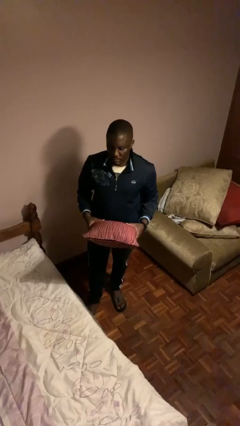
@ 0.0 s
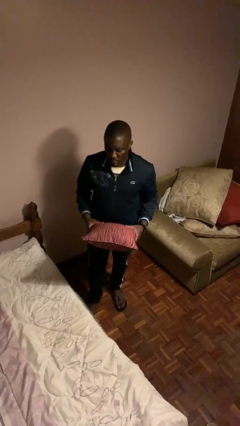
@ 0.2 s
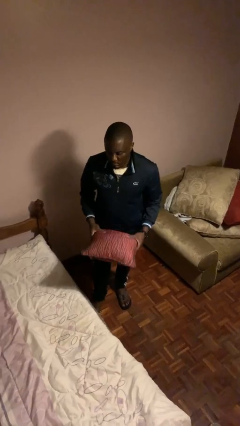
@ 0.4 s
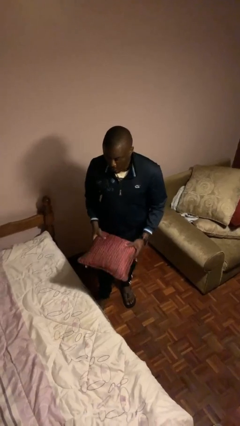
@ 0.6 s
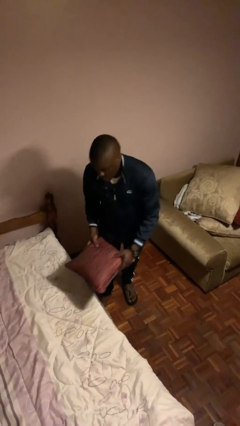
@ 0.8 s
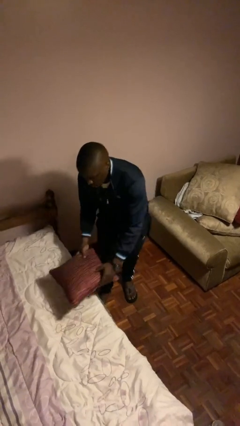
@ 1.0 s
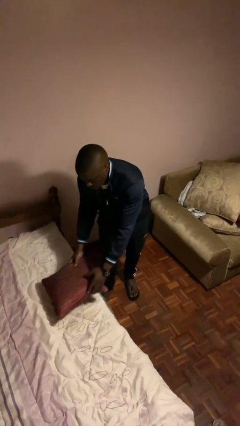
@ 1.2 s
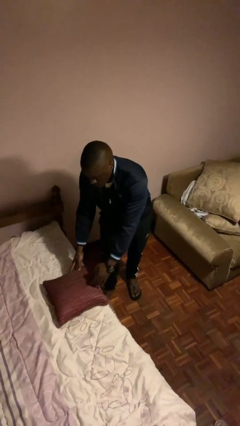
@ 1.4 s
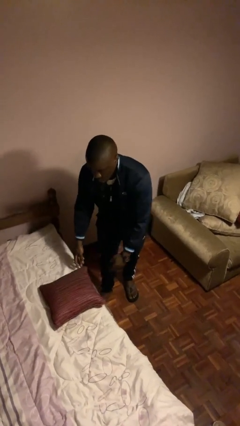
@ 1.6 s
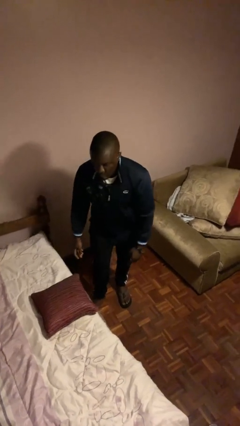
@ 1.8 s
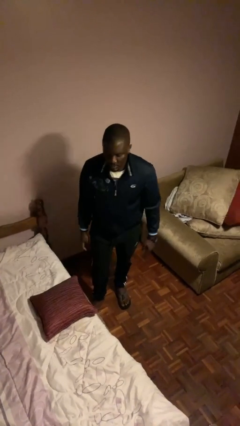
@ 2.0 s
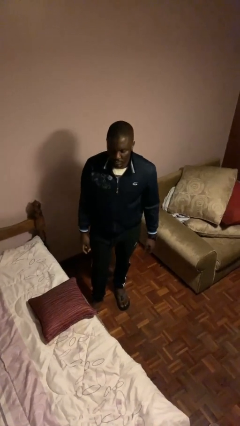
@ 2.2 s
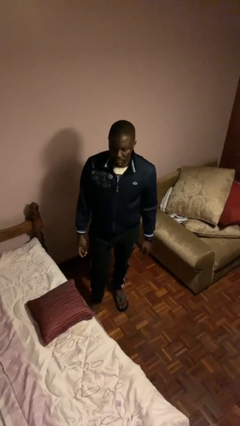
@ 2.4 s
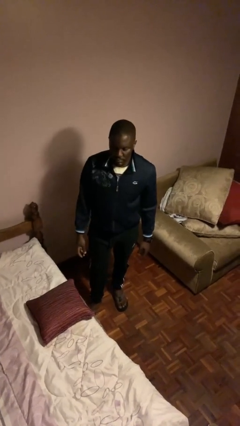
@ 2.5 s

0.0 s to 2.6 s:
person puts down object on bed

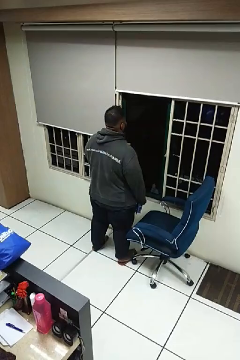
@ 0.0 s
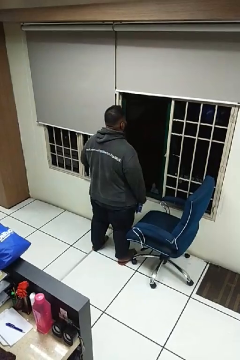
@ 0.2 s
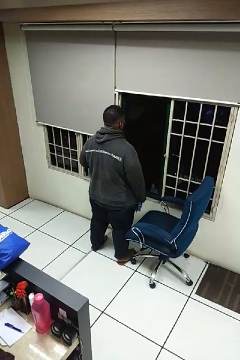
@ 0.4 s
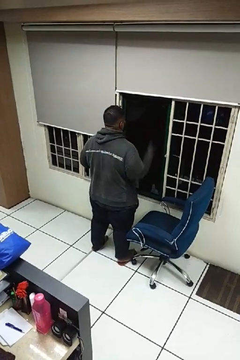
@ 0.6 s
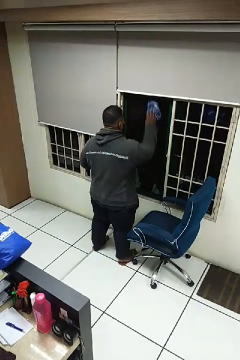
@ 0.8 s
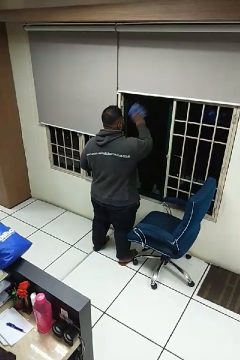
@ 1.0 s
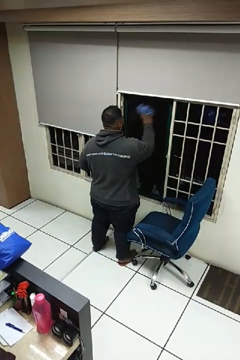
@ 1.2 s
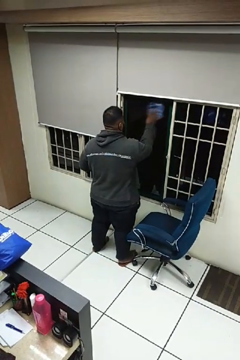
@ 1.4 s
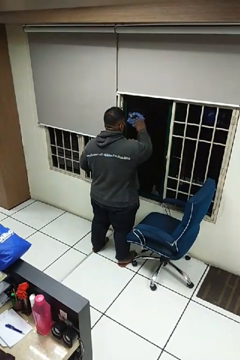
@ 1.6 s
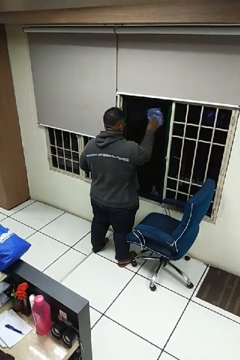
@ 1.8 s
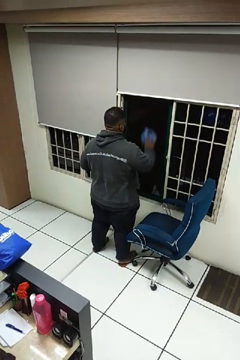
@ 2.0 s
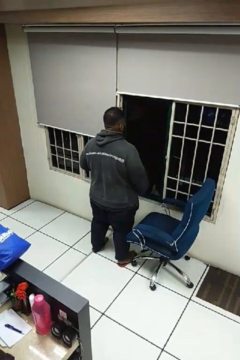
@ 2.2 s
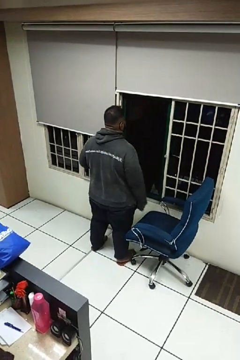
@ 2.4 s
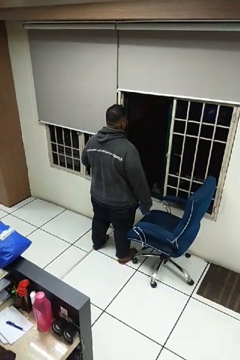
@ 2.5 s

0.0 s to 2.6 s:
person washes window

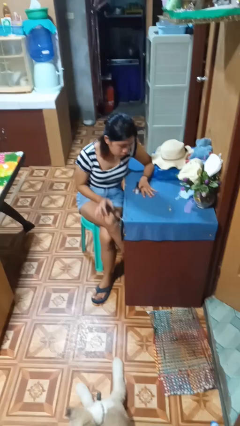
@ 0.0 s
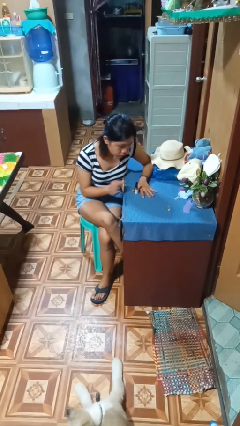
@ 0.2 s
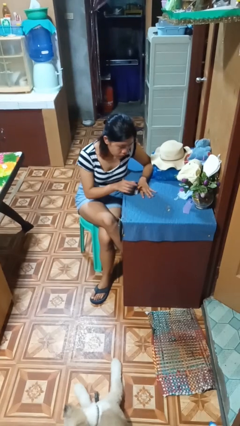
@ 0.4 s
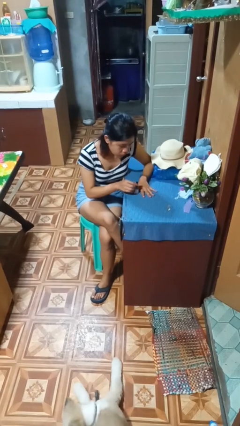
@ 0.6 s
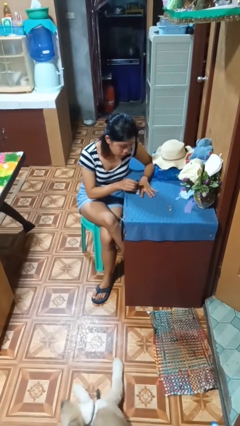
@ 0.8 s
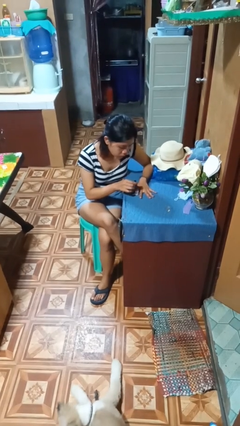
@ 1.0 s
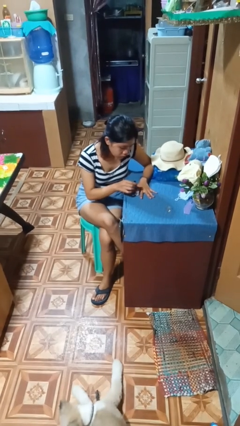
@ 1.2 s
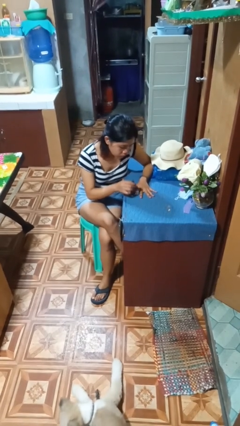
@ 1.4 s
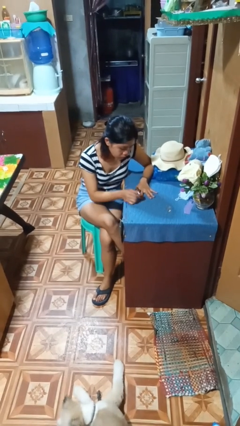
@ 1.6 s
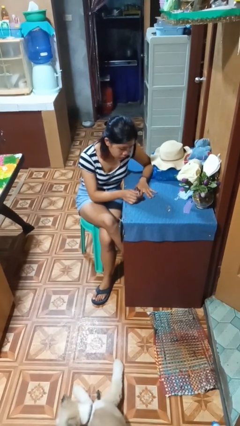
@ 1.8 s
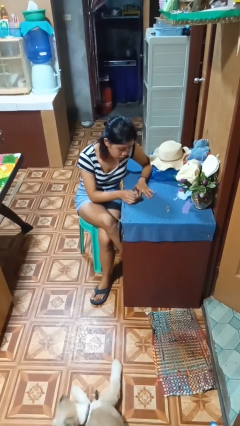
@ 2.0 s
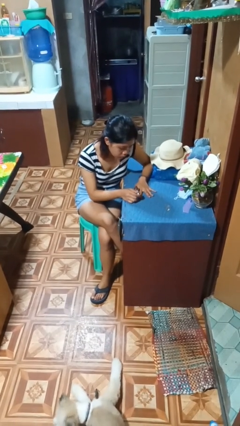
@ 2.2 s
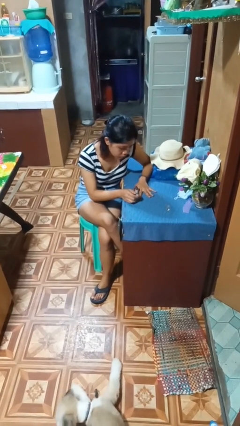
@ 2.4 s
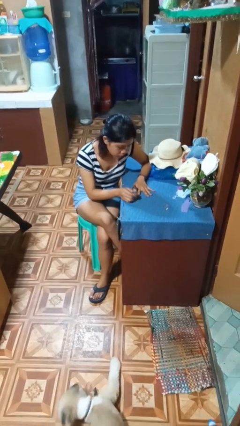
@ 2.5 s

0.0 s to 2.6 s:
person paints fingernails

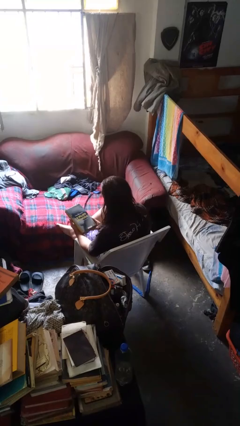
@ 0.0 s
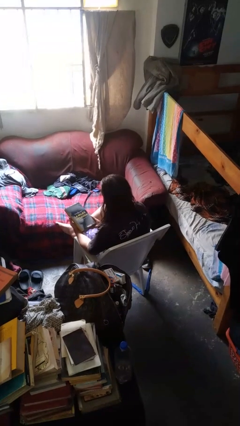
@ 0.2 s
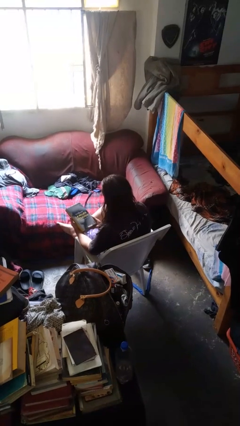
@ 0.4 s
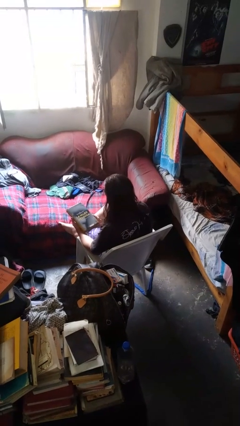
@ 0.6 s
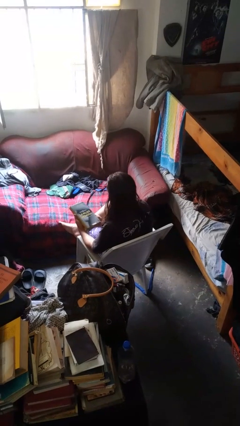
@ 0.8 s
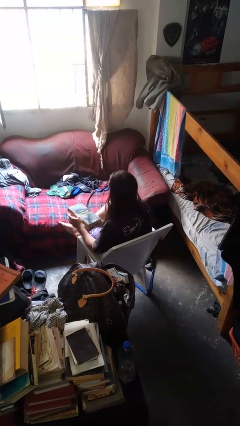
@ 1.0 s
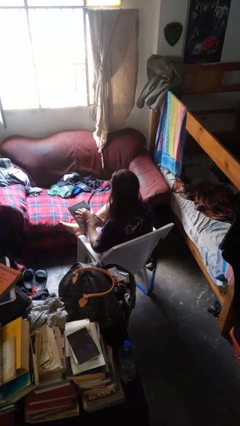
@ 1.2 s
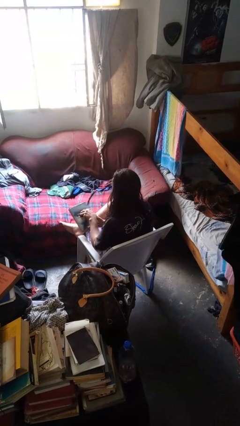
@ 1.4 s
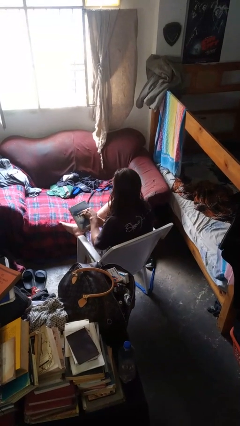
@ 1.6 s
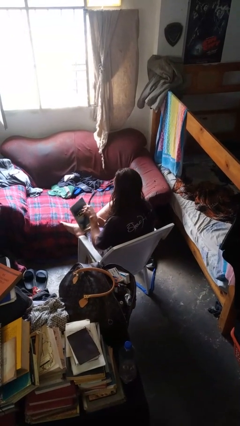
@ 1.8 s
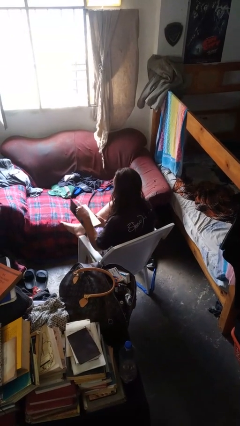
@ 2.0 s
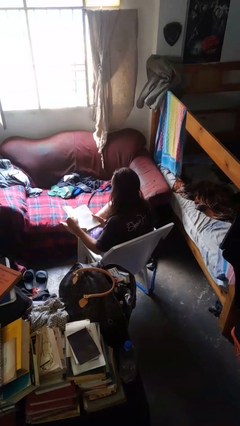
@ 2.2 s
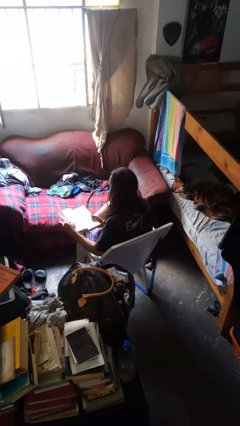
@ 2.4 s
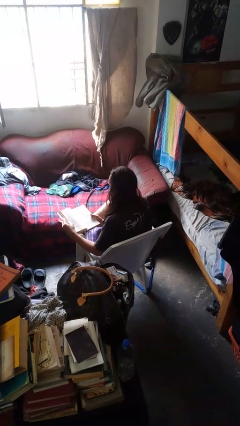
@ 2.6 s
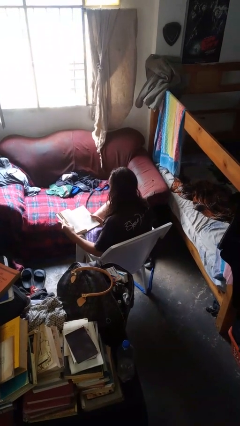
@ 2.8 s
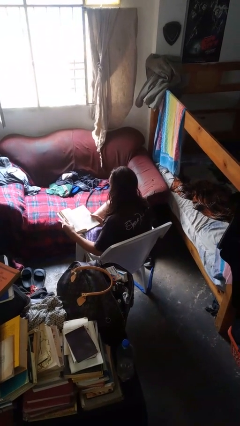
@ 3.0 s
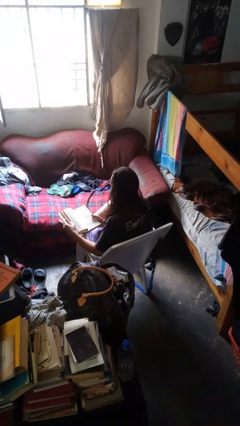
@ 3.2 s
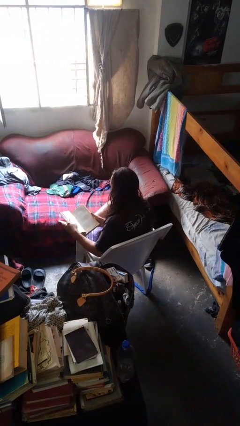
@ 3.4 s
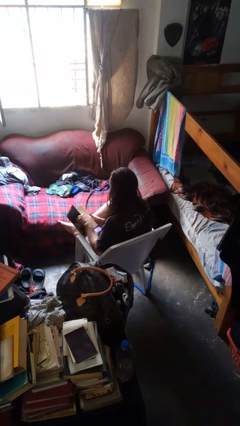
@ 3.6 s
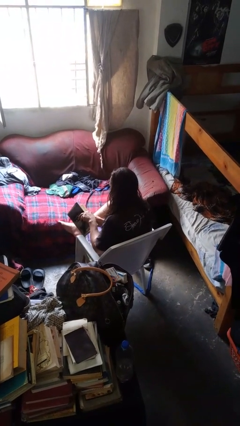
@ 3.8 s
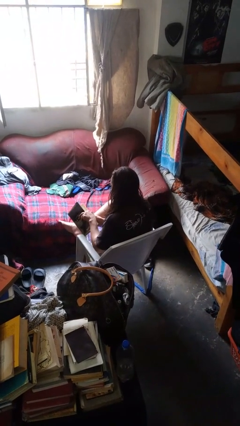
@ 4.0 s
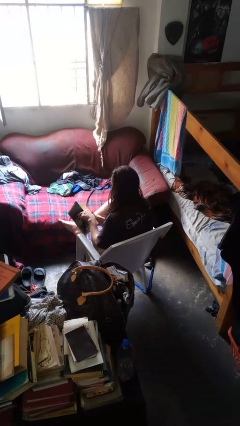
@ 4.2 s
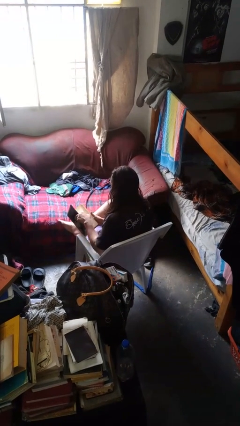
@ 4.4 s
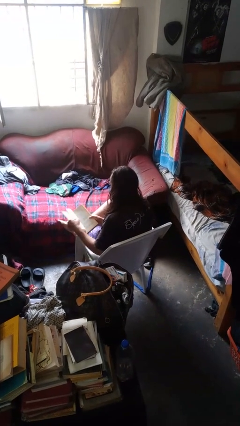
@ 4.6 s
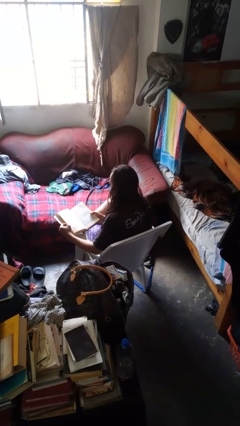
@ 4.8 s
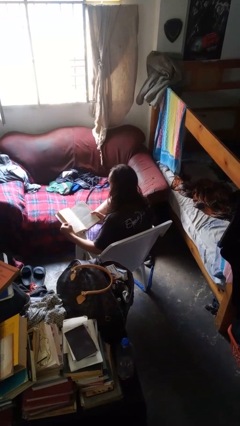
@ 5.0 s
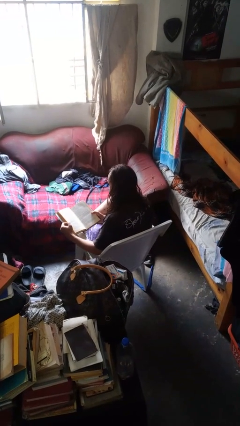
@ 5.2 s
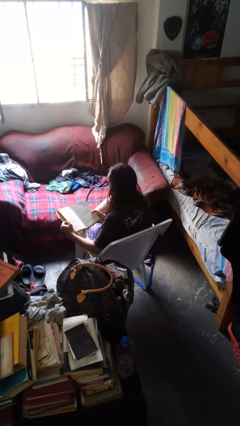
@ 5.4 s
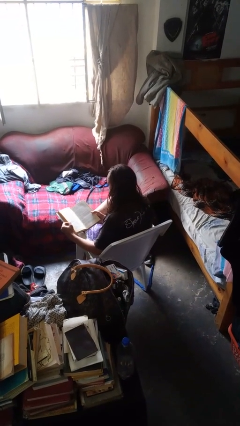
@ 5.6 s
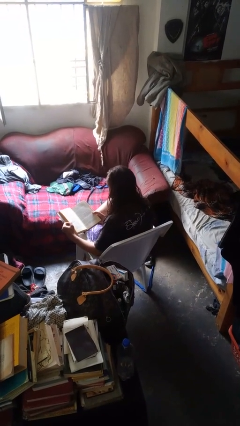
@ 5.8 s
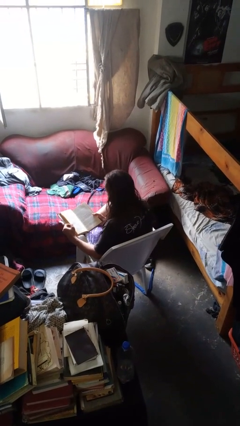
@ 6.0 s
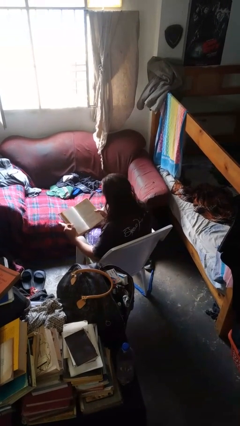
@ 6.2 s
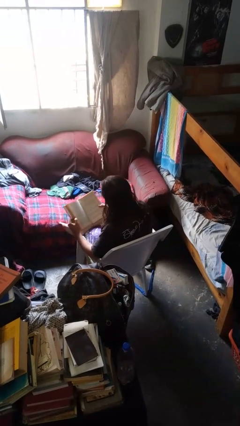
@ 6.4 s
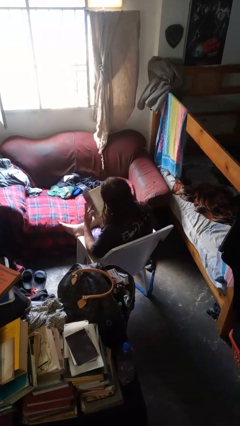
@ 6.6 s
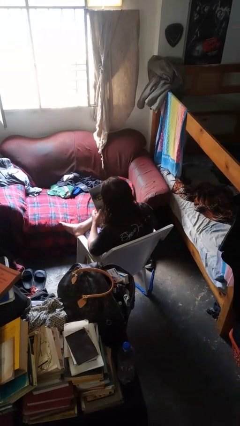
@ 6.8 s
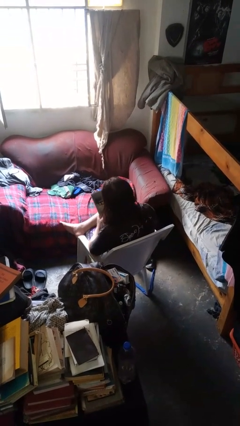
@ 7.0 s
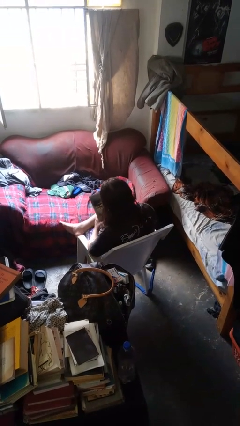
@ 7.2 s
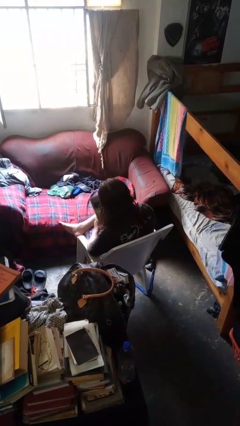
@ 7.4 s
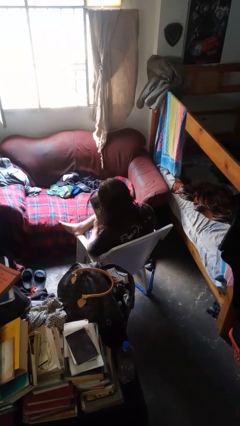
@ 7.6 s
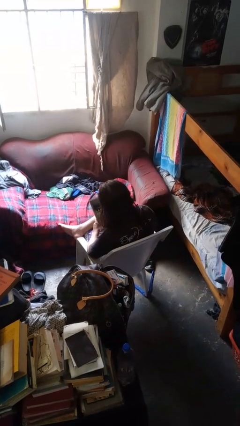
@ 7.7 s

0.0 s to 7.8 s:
person reads book

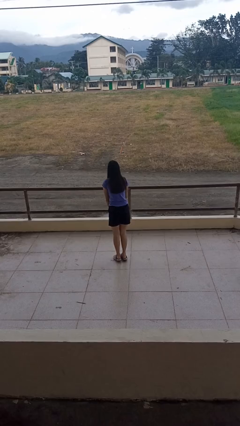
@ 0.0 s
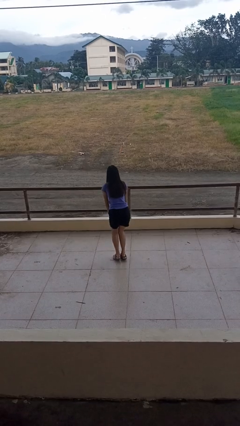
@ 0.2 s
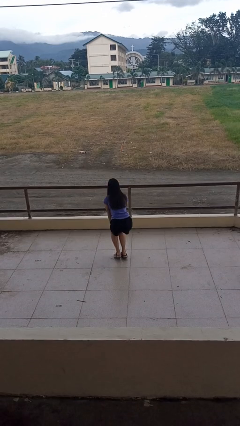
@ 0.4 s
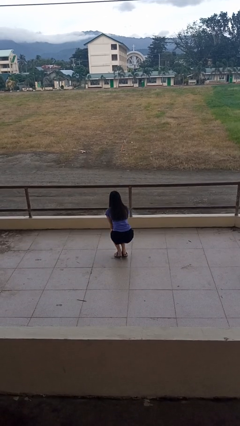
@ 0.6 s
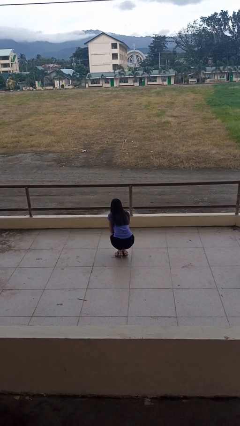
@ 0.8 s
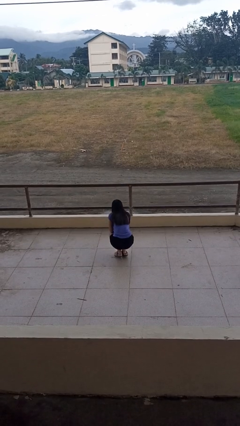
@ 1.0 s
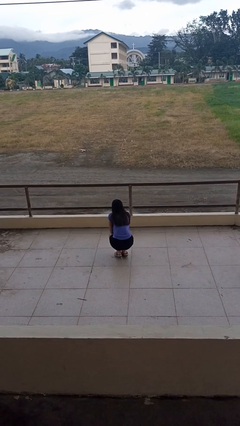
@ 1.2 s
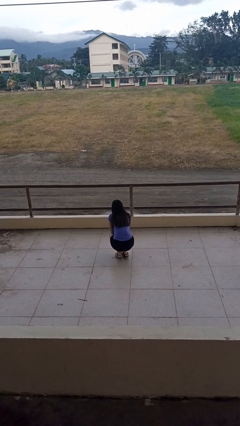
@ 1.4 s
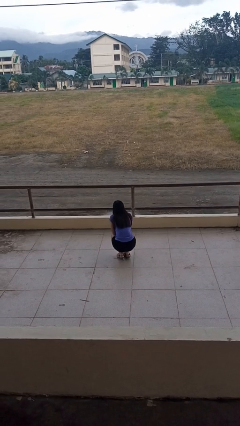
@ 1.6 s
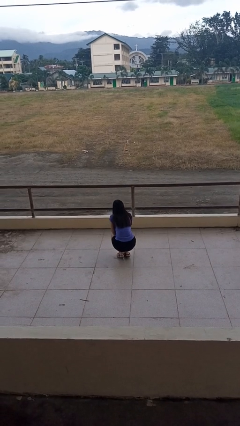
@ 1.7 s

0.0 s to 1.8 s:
person squats

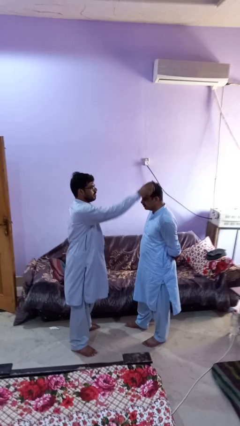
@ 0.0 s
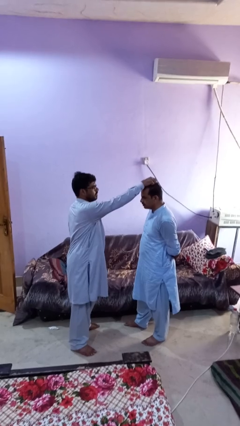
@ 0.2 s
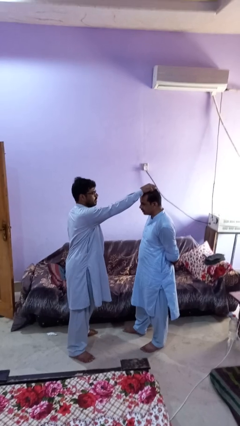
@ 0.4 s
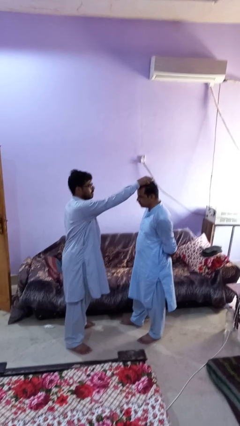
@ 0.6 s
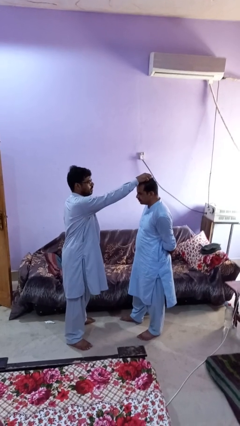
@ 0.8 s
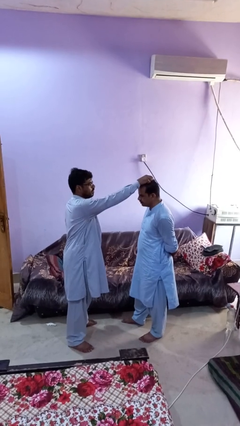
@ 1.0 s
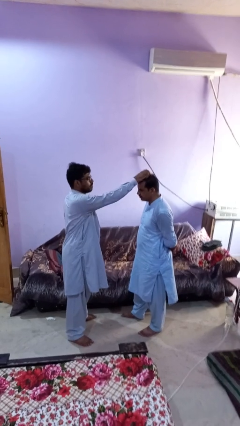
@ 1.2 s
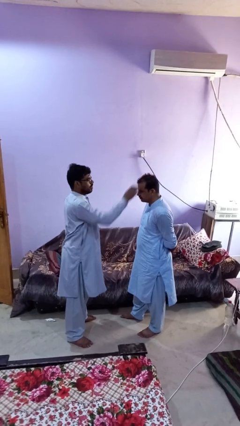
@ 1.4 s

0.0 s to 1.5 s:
person grabs person by hair
